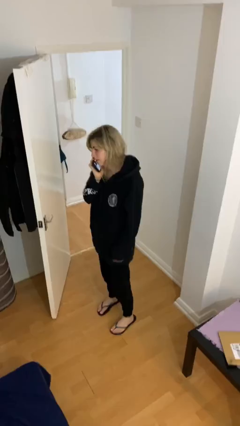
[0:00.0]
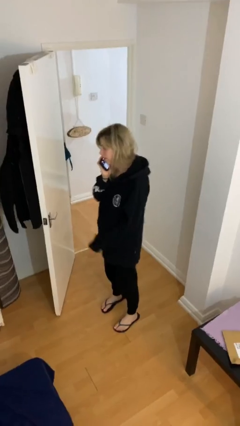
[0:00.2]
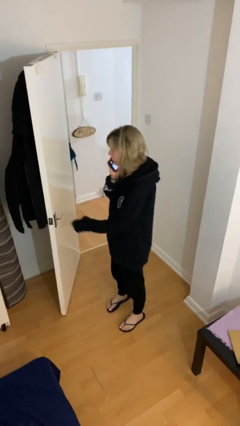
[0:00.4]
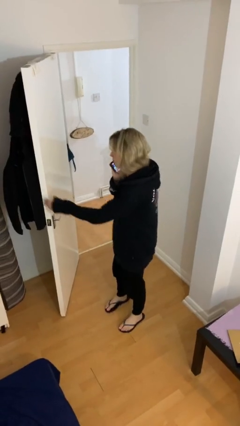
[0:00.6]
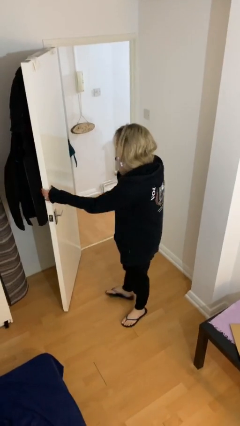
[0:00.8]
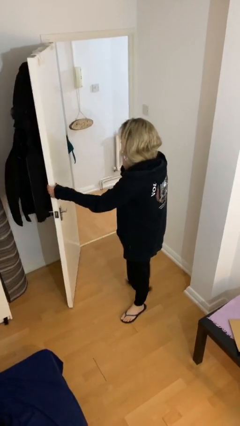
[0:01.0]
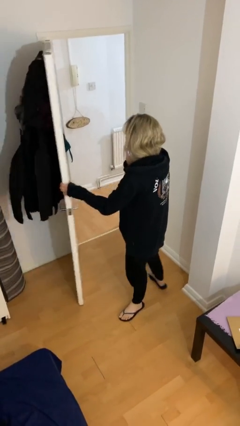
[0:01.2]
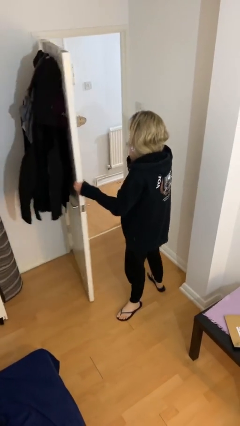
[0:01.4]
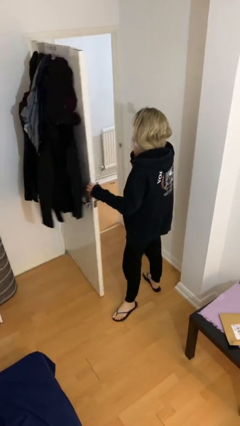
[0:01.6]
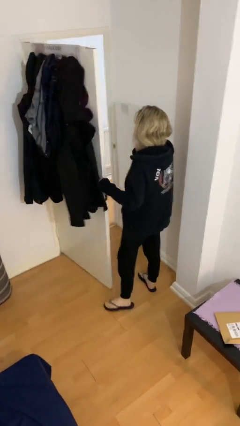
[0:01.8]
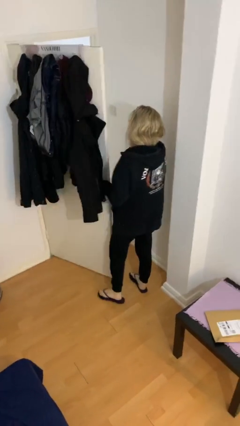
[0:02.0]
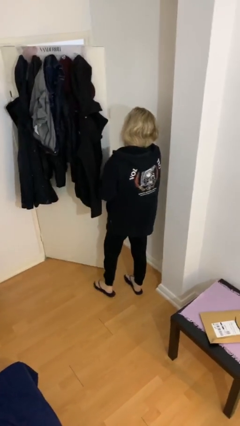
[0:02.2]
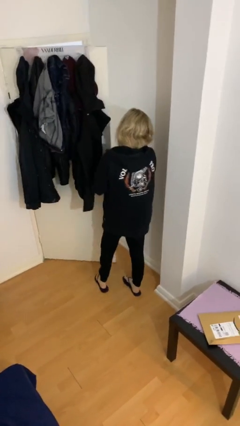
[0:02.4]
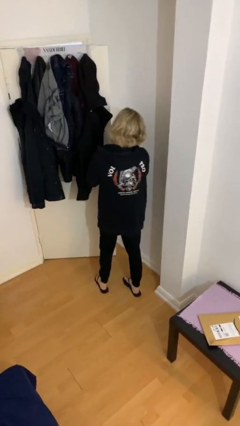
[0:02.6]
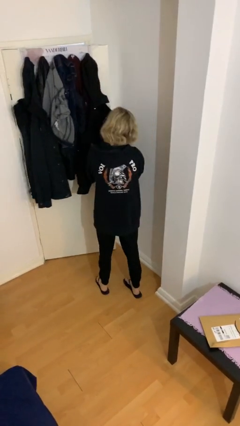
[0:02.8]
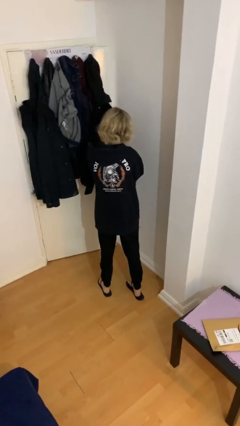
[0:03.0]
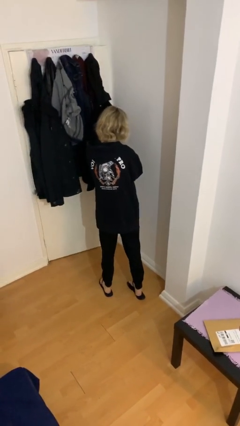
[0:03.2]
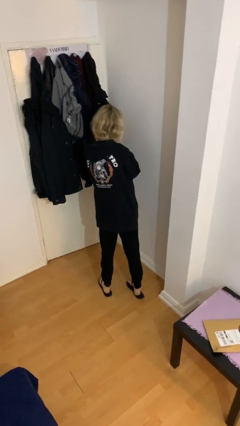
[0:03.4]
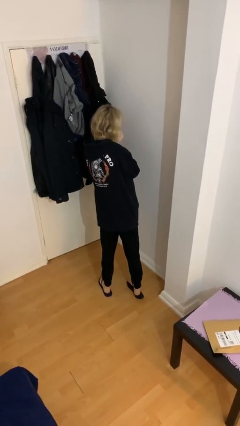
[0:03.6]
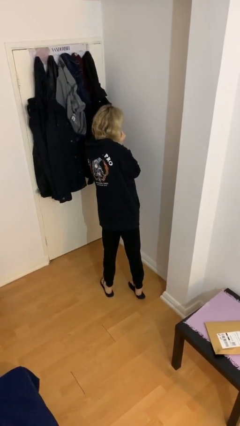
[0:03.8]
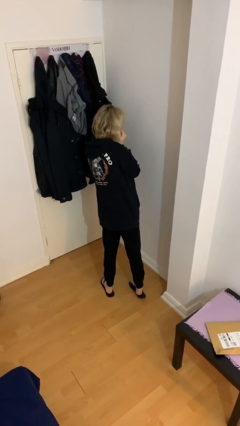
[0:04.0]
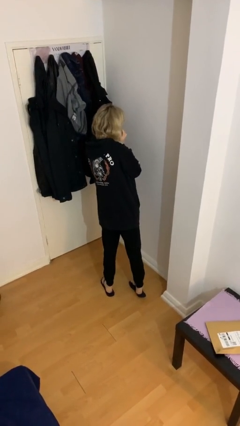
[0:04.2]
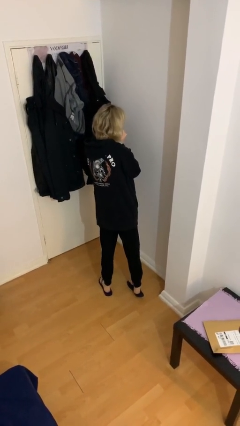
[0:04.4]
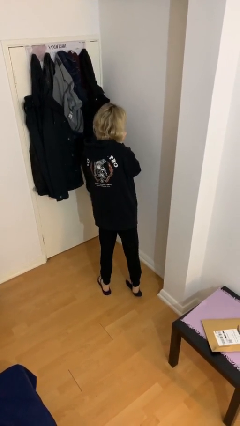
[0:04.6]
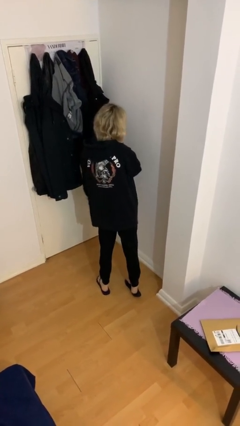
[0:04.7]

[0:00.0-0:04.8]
person closes facility door

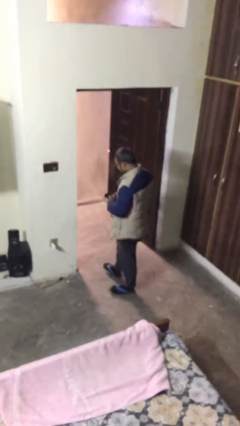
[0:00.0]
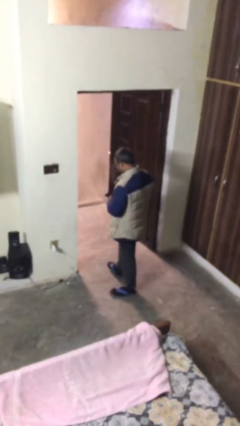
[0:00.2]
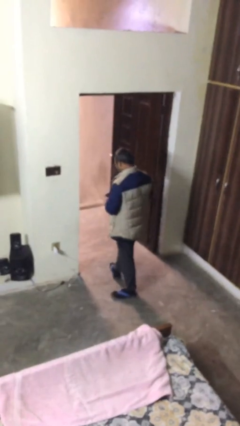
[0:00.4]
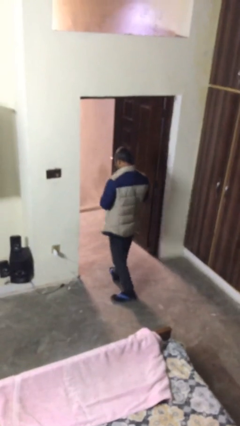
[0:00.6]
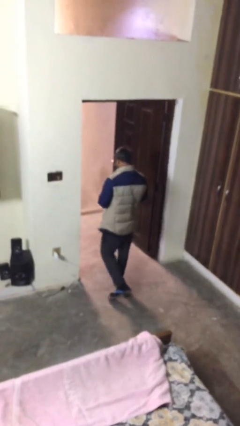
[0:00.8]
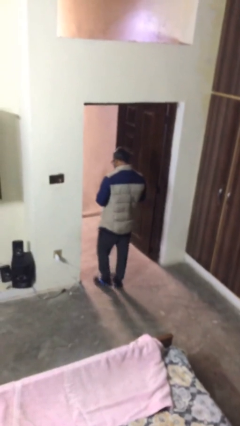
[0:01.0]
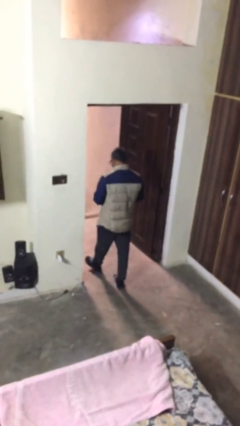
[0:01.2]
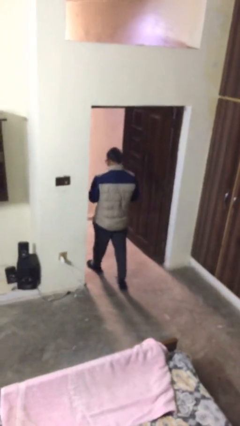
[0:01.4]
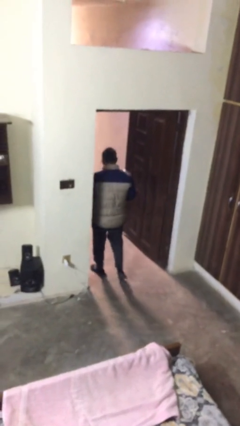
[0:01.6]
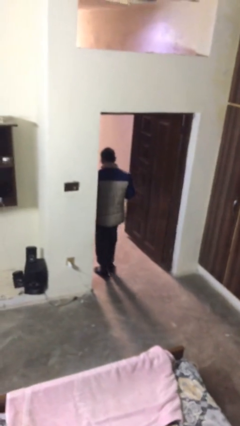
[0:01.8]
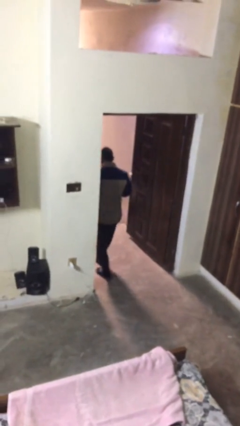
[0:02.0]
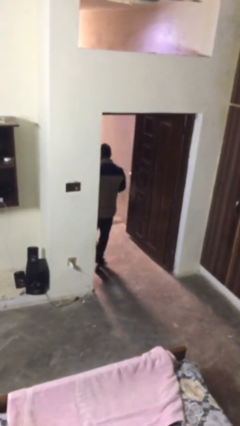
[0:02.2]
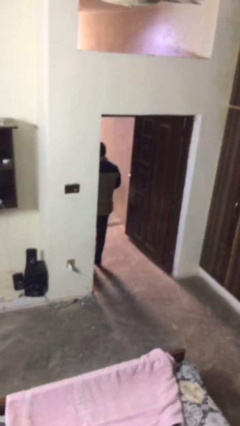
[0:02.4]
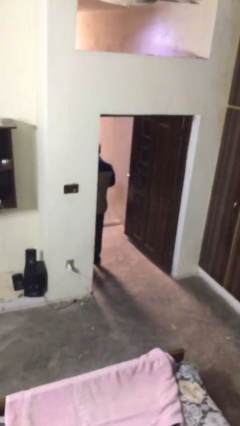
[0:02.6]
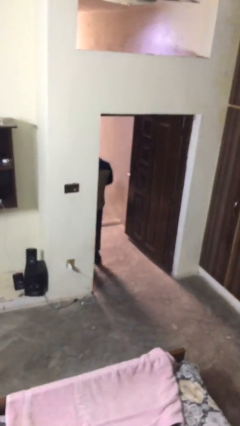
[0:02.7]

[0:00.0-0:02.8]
person exits scene through structure

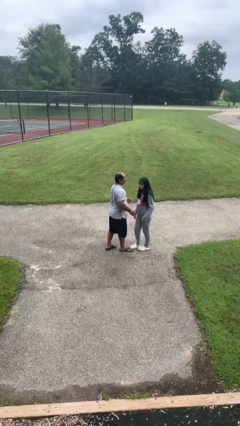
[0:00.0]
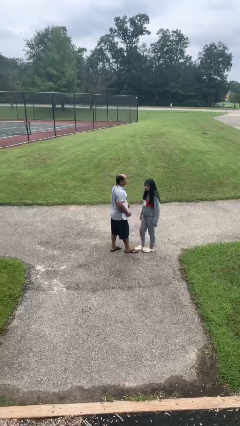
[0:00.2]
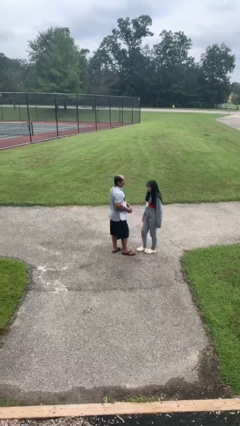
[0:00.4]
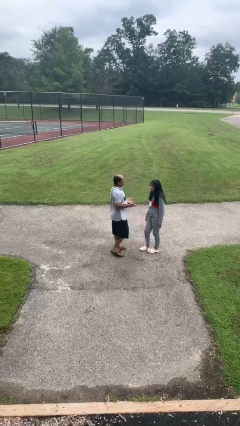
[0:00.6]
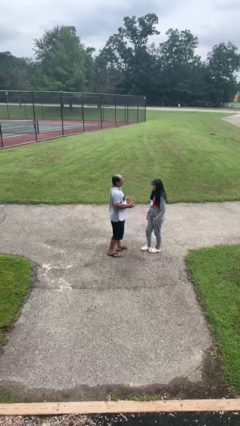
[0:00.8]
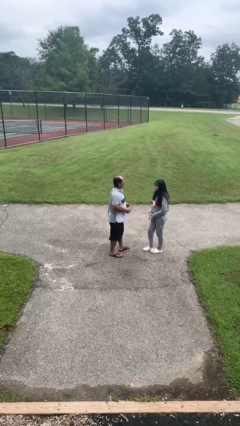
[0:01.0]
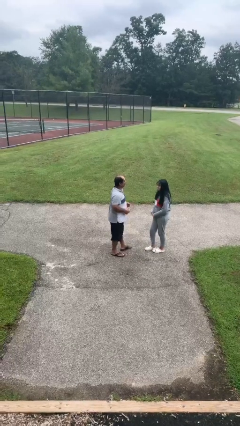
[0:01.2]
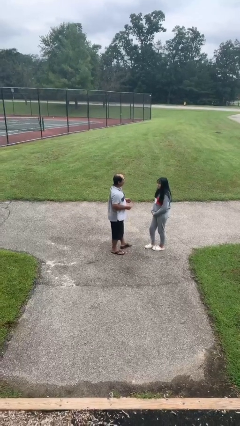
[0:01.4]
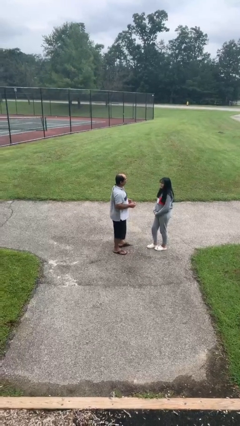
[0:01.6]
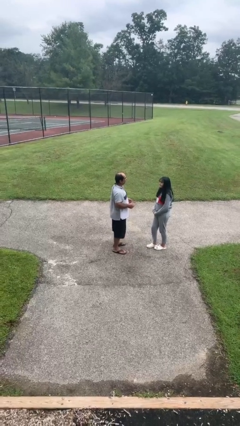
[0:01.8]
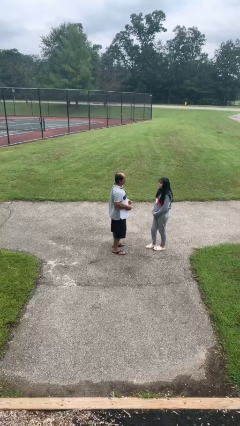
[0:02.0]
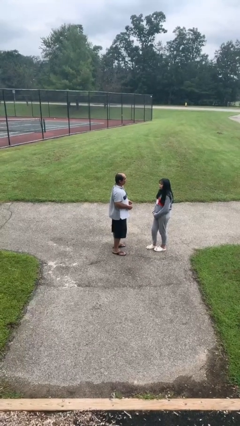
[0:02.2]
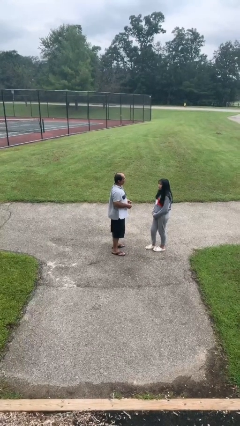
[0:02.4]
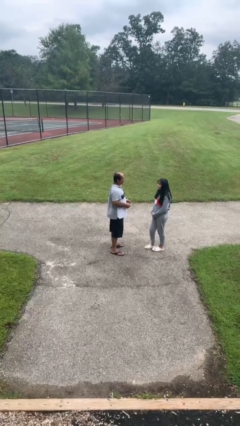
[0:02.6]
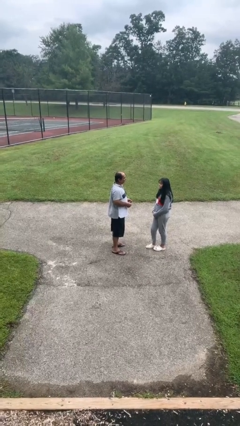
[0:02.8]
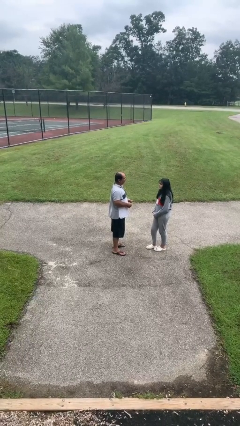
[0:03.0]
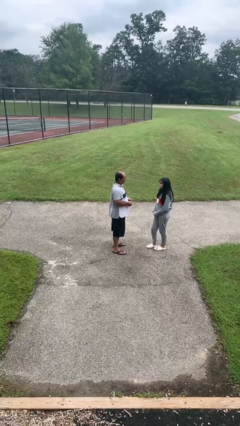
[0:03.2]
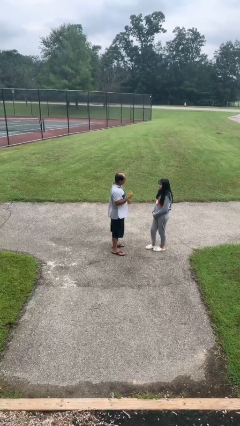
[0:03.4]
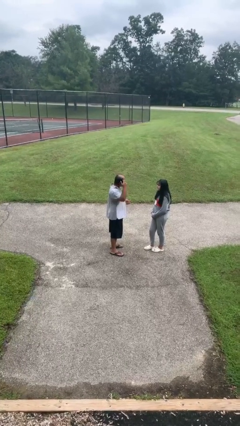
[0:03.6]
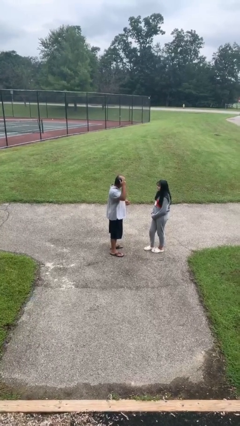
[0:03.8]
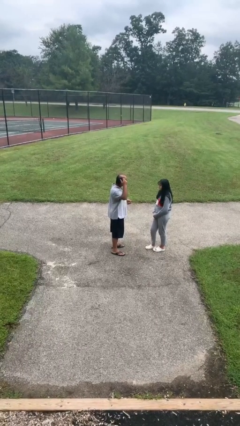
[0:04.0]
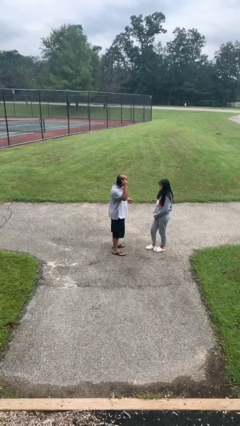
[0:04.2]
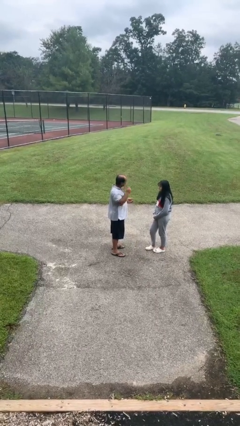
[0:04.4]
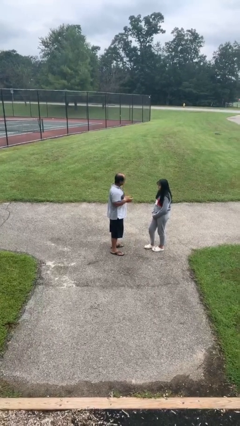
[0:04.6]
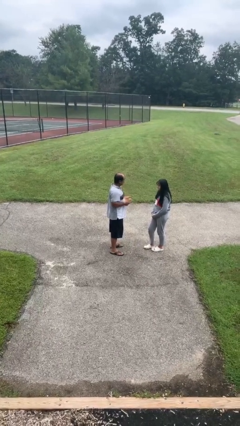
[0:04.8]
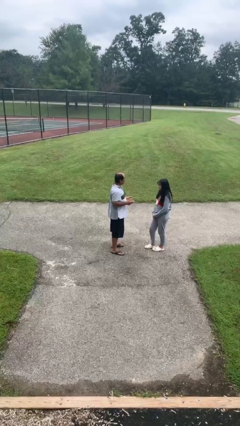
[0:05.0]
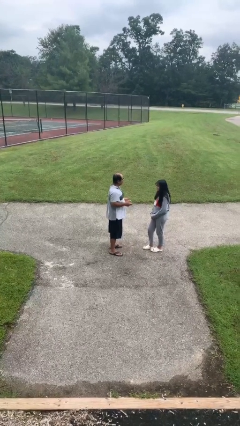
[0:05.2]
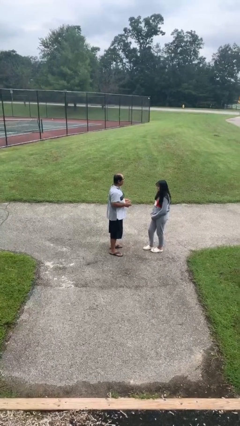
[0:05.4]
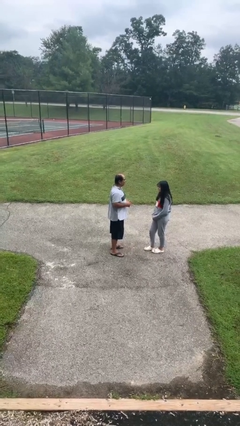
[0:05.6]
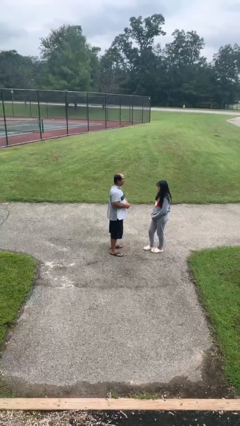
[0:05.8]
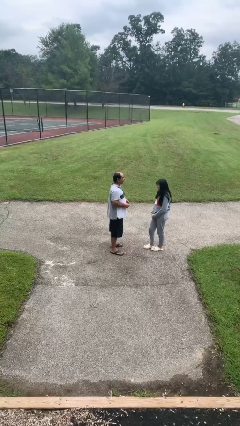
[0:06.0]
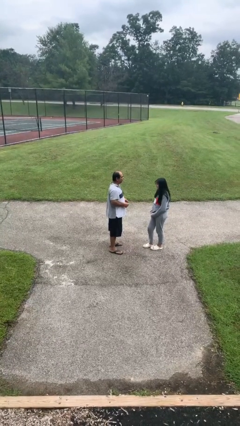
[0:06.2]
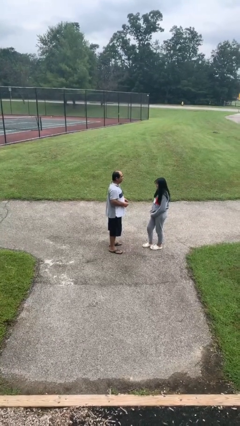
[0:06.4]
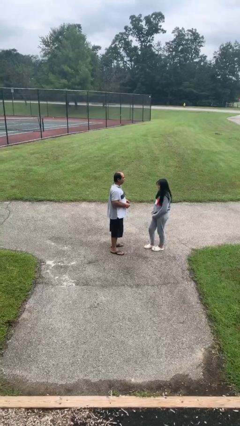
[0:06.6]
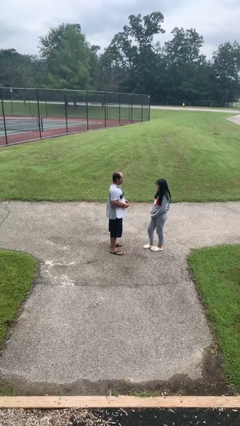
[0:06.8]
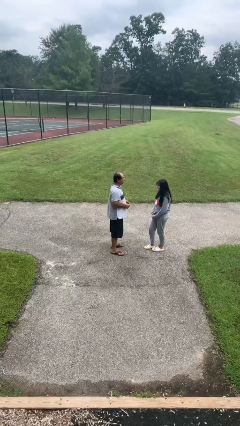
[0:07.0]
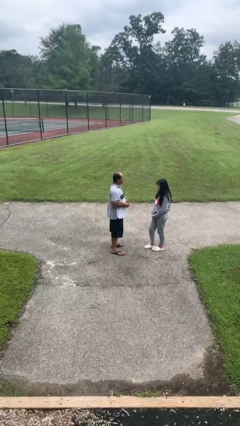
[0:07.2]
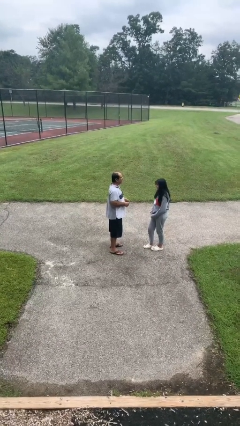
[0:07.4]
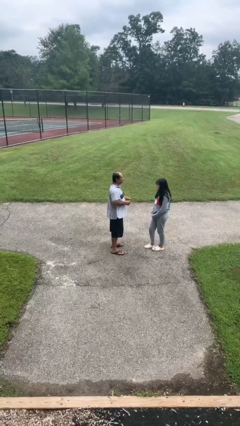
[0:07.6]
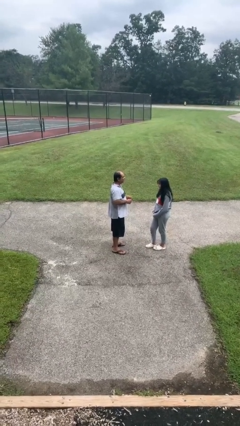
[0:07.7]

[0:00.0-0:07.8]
person talks to person

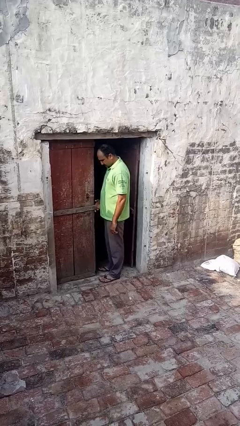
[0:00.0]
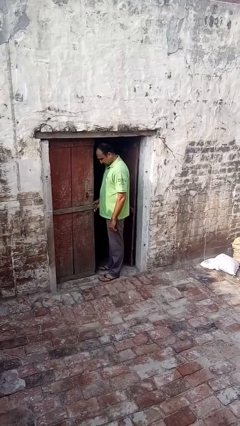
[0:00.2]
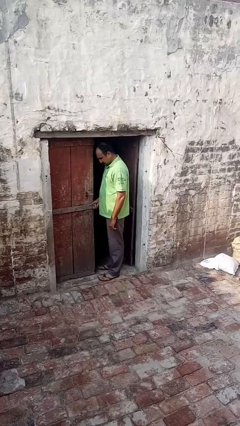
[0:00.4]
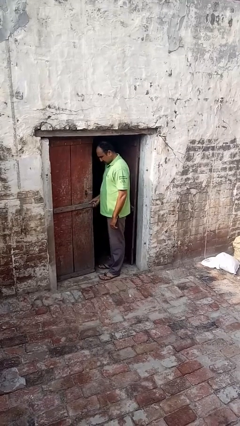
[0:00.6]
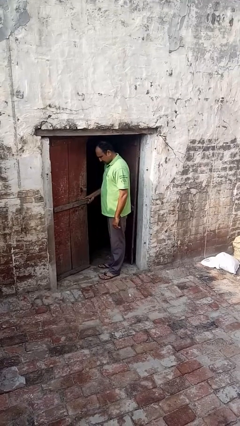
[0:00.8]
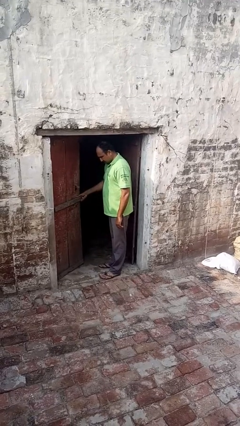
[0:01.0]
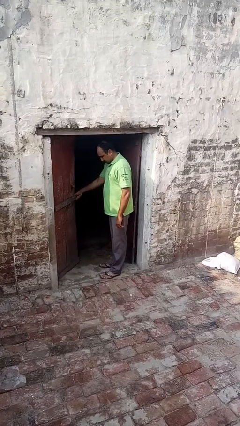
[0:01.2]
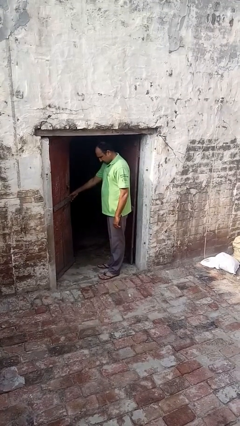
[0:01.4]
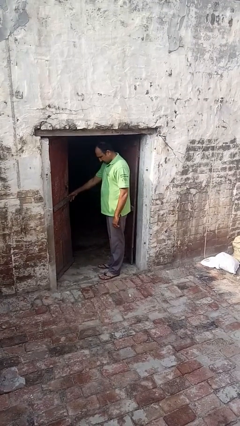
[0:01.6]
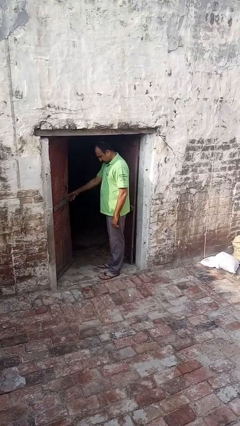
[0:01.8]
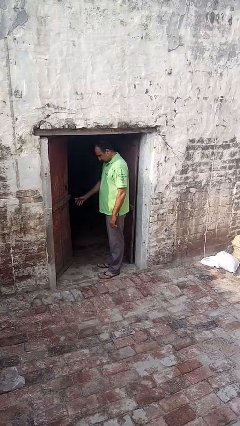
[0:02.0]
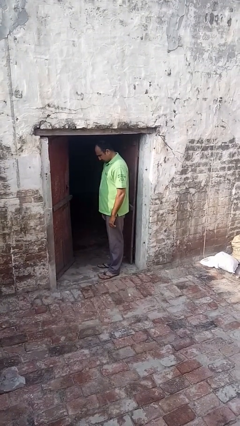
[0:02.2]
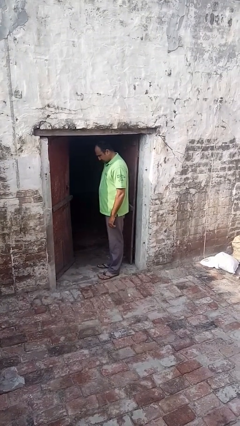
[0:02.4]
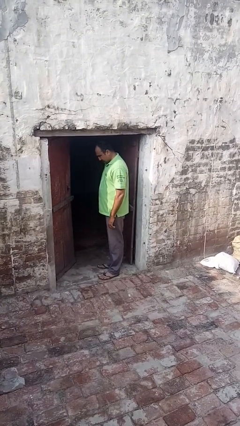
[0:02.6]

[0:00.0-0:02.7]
person opens facility door
